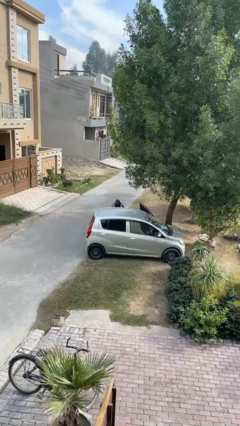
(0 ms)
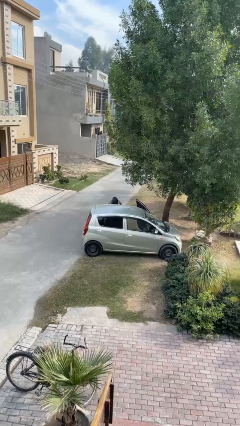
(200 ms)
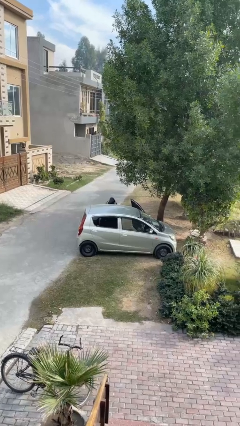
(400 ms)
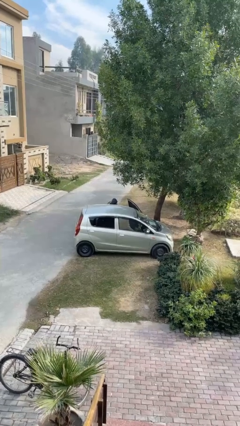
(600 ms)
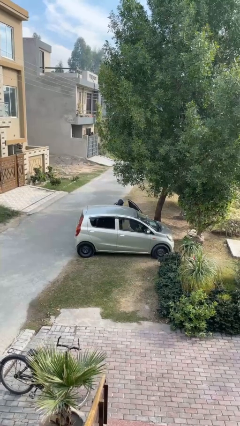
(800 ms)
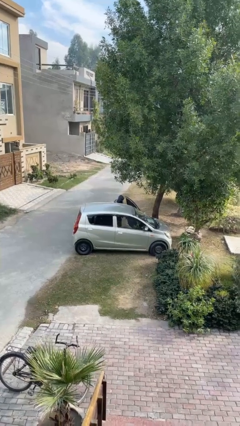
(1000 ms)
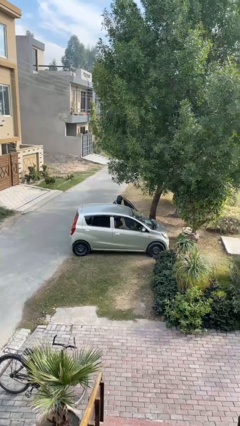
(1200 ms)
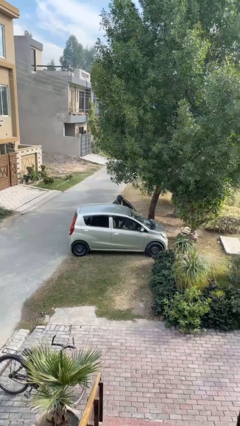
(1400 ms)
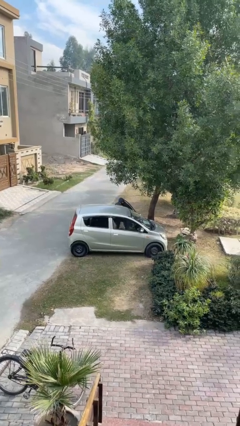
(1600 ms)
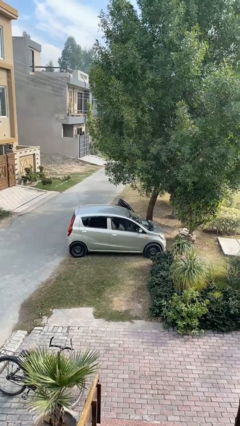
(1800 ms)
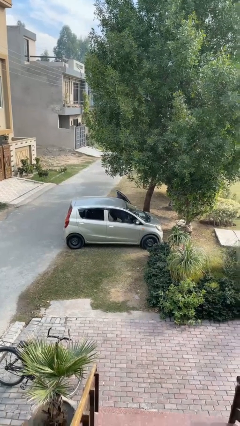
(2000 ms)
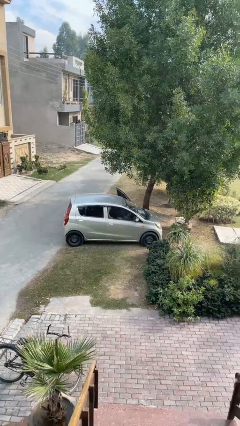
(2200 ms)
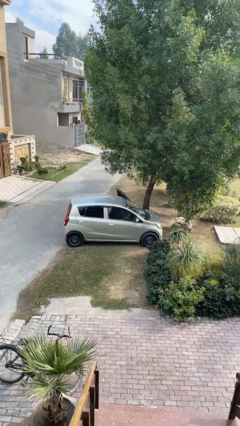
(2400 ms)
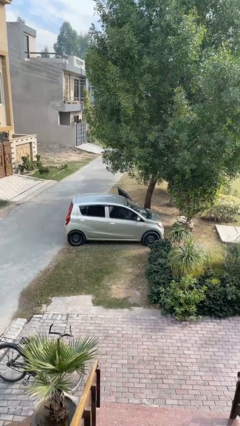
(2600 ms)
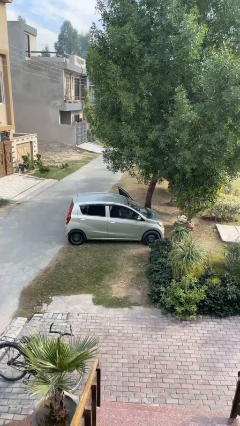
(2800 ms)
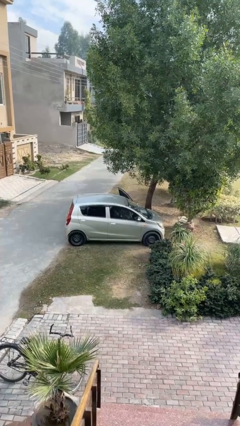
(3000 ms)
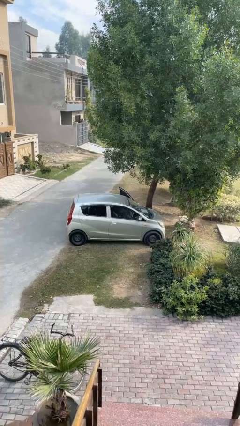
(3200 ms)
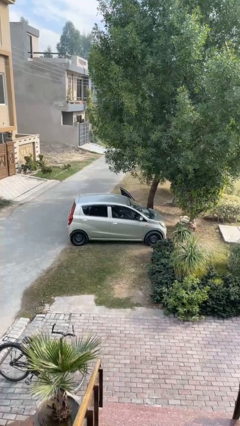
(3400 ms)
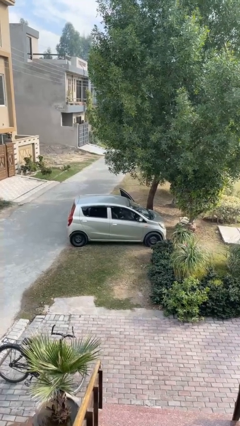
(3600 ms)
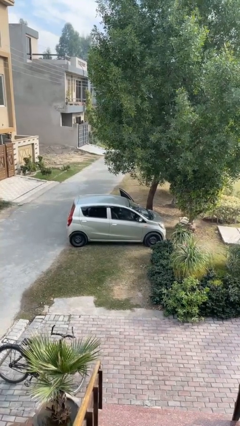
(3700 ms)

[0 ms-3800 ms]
person enters car

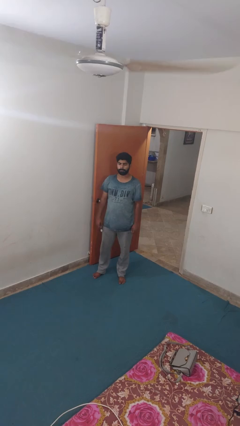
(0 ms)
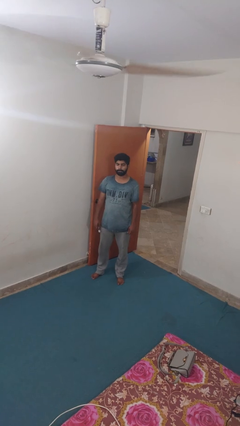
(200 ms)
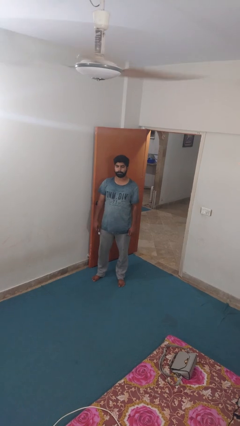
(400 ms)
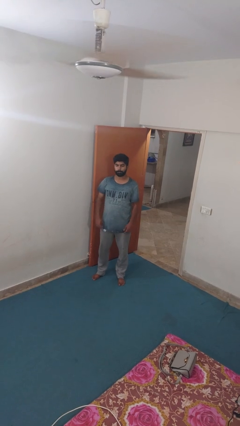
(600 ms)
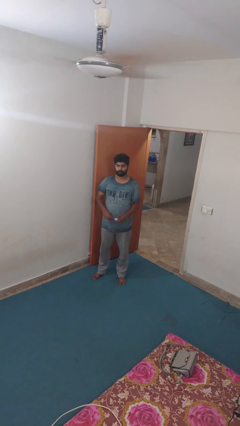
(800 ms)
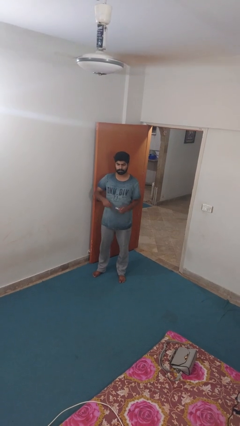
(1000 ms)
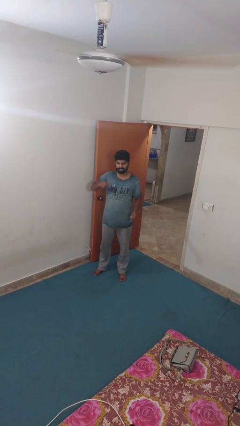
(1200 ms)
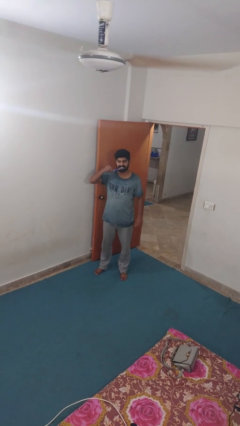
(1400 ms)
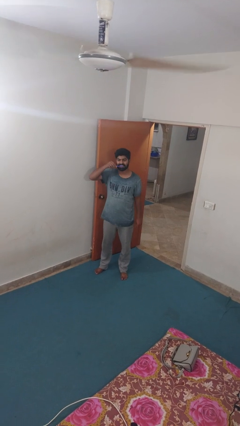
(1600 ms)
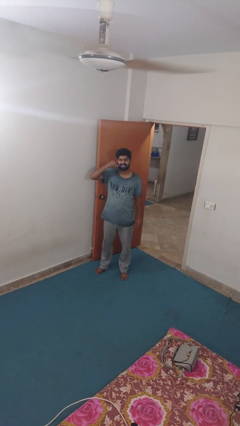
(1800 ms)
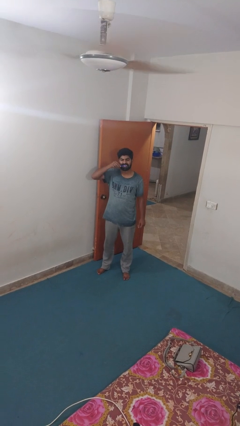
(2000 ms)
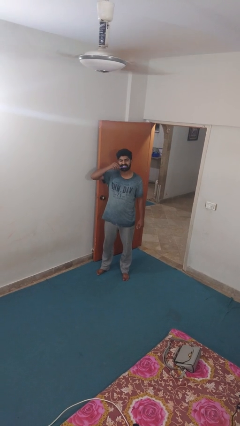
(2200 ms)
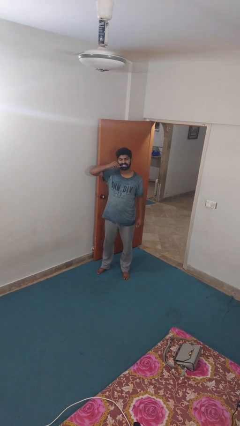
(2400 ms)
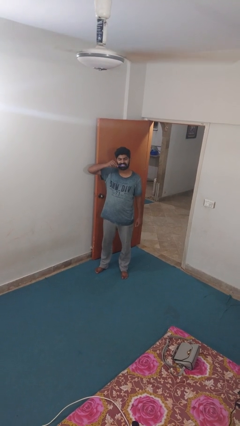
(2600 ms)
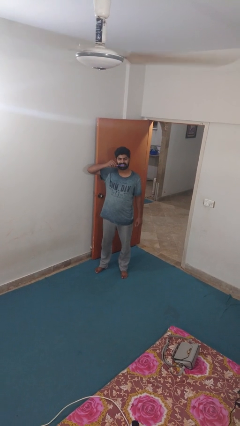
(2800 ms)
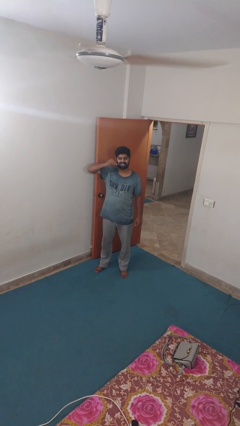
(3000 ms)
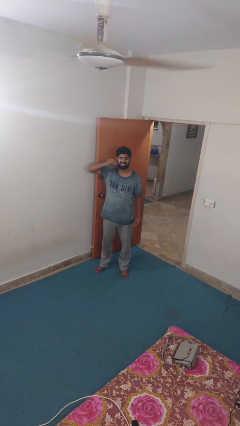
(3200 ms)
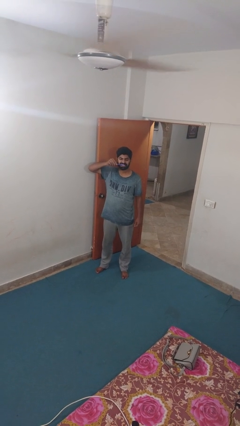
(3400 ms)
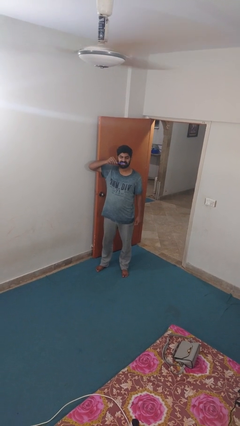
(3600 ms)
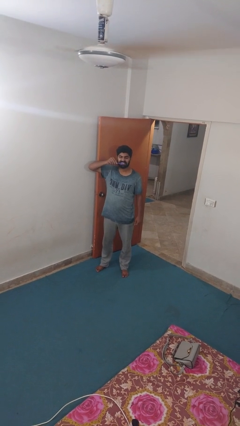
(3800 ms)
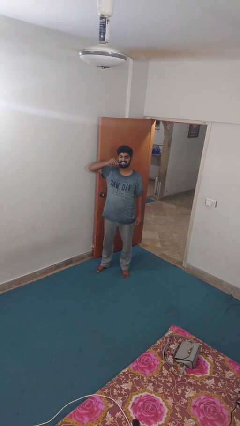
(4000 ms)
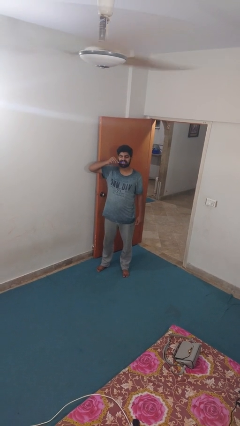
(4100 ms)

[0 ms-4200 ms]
person brushes teeth

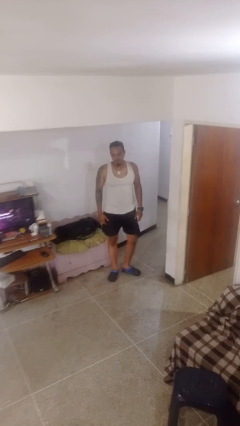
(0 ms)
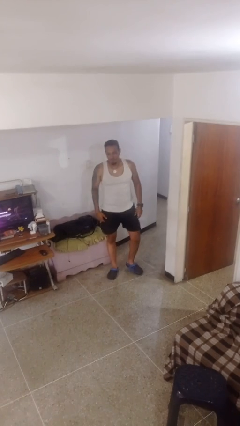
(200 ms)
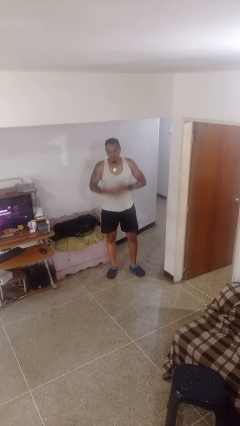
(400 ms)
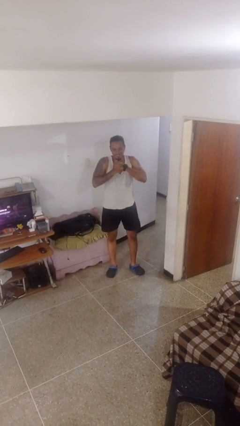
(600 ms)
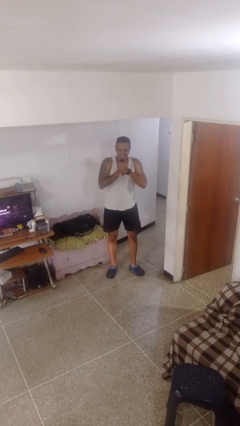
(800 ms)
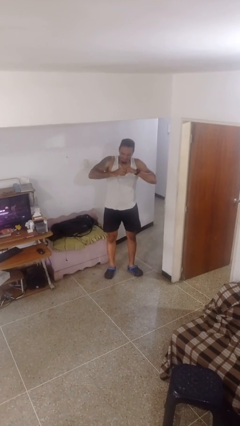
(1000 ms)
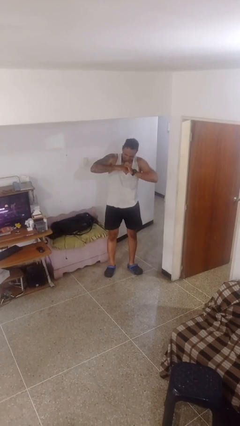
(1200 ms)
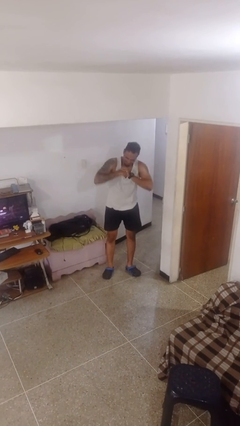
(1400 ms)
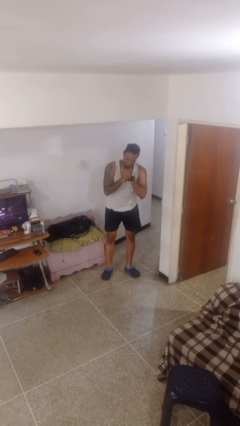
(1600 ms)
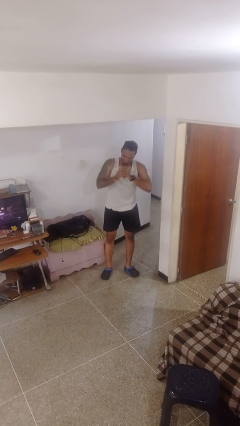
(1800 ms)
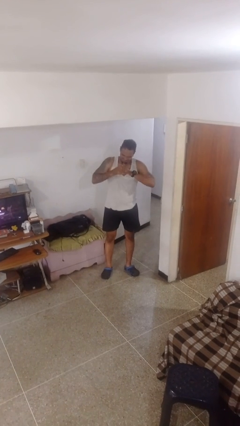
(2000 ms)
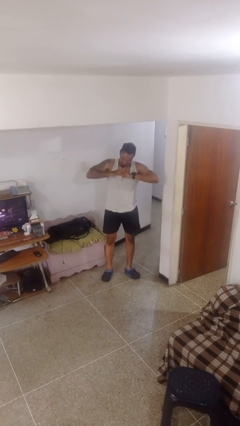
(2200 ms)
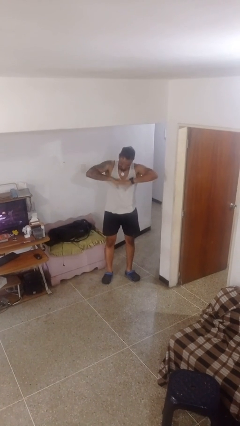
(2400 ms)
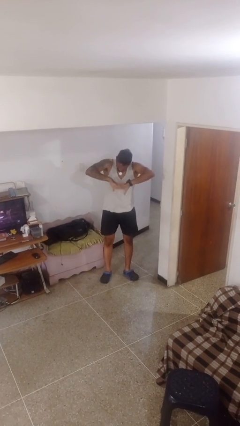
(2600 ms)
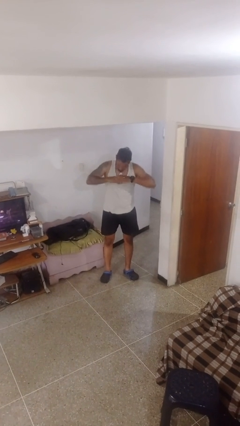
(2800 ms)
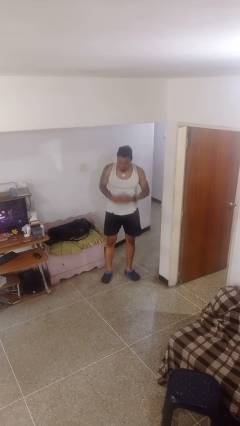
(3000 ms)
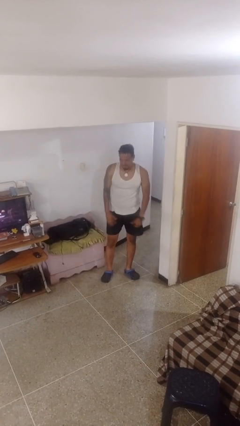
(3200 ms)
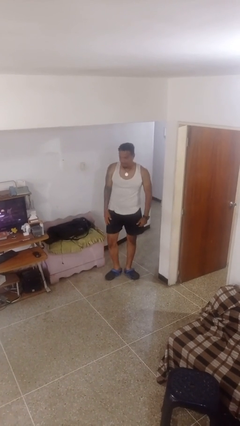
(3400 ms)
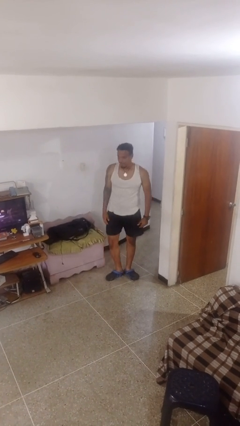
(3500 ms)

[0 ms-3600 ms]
person cracks knuckles

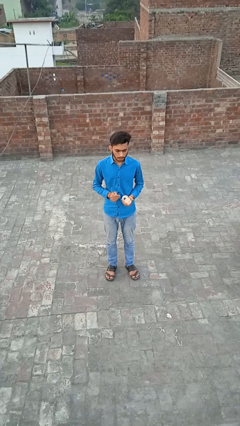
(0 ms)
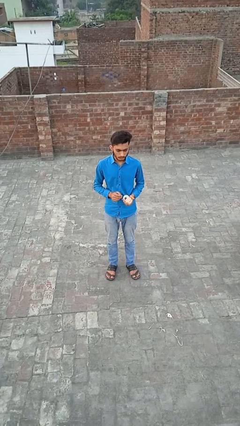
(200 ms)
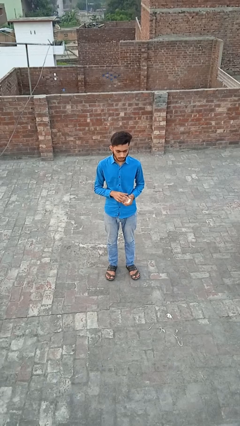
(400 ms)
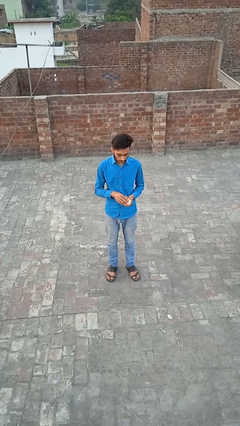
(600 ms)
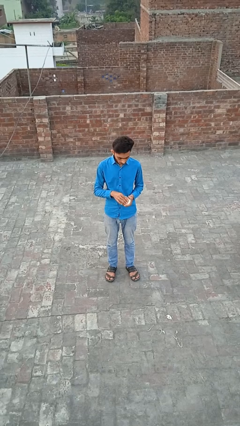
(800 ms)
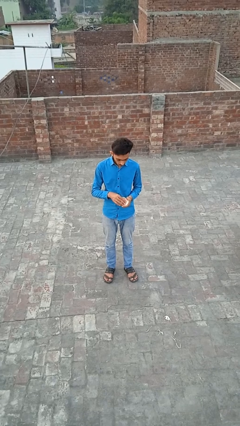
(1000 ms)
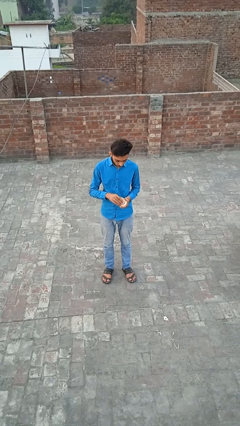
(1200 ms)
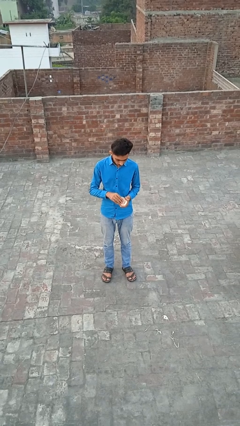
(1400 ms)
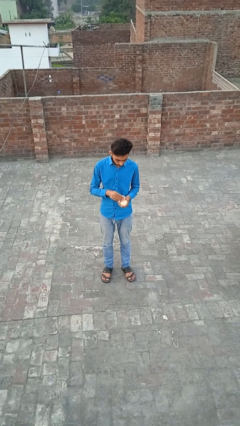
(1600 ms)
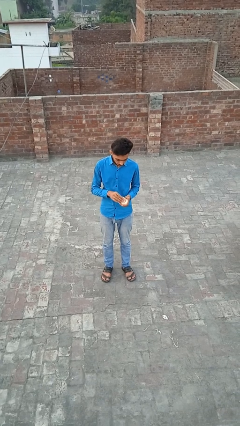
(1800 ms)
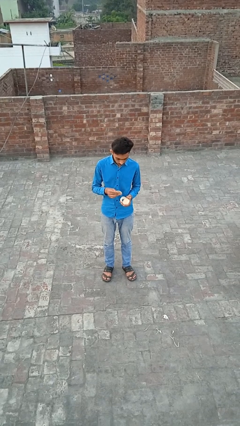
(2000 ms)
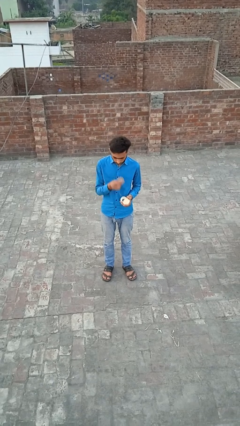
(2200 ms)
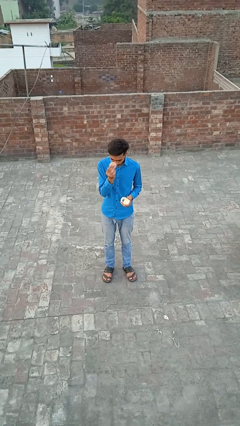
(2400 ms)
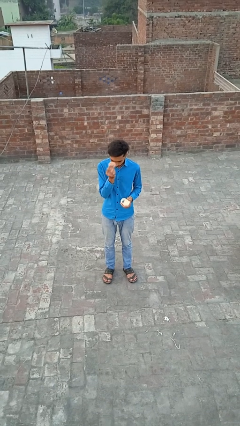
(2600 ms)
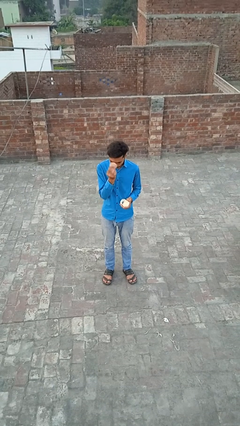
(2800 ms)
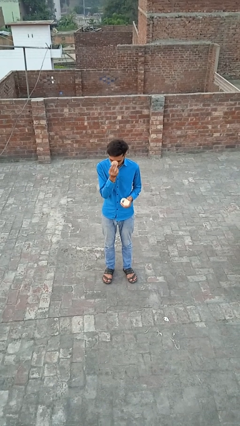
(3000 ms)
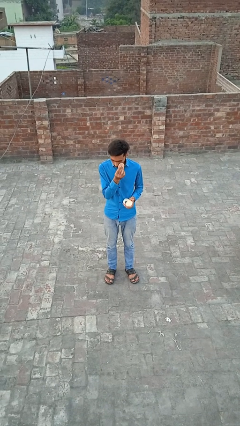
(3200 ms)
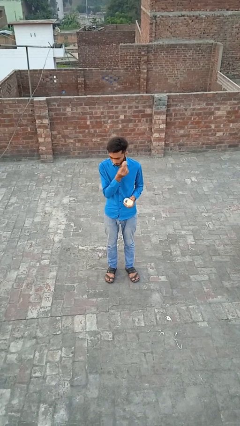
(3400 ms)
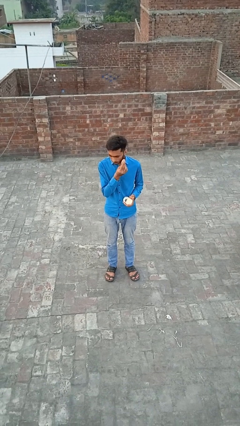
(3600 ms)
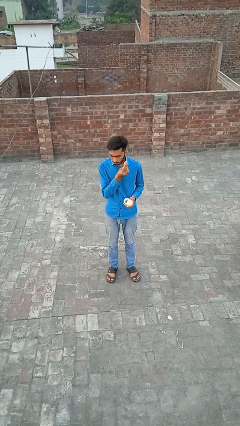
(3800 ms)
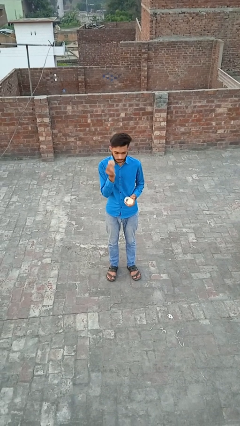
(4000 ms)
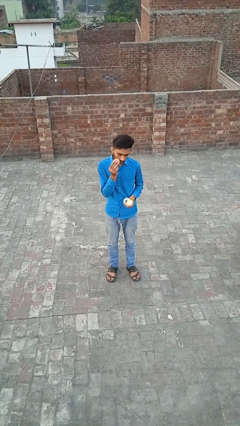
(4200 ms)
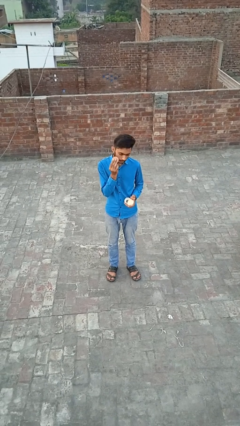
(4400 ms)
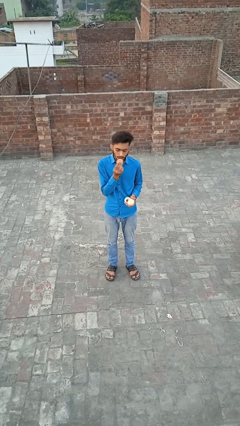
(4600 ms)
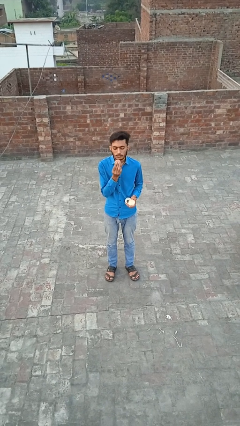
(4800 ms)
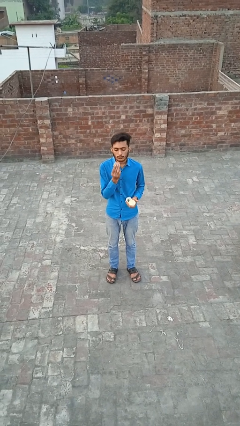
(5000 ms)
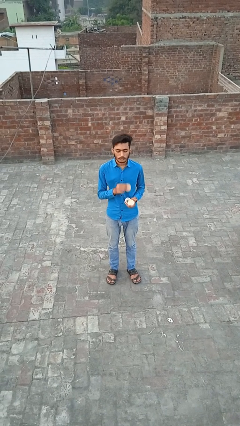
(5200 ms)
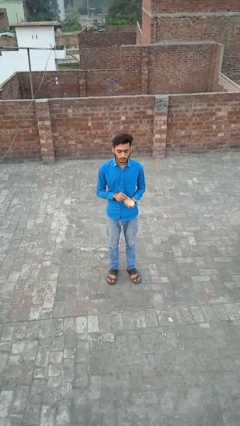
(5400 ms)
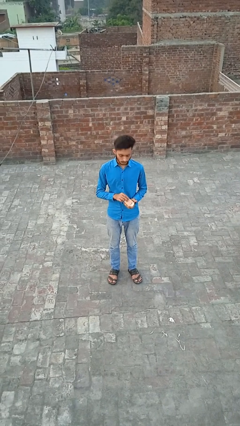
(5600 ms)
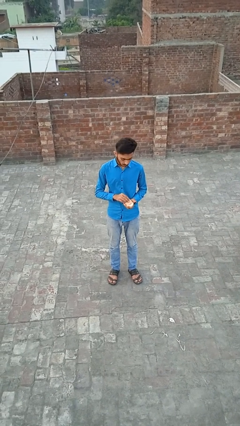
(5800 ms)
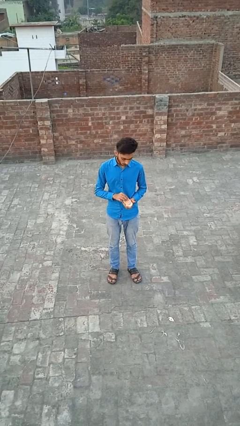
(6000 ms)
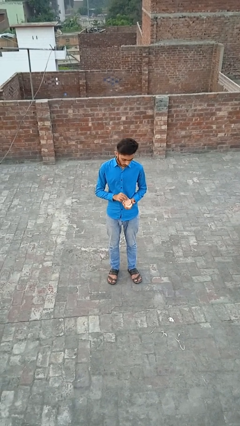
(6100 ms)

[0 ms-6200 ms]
person applies foundation makeup

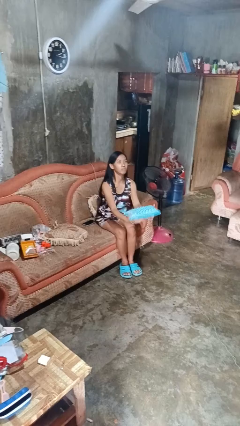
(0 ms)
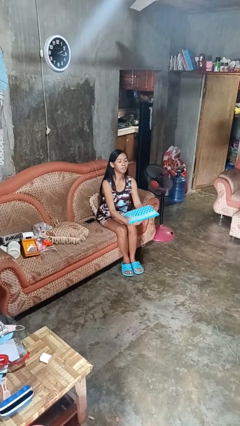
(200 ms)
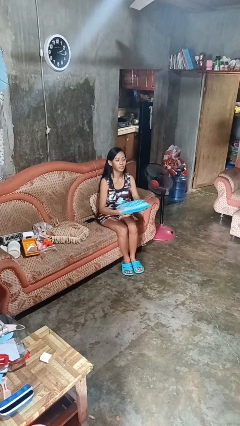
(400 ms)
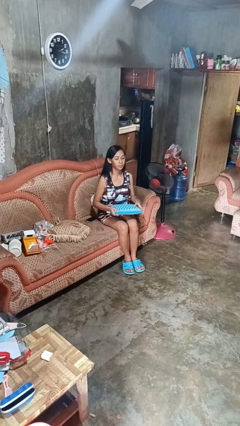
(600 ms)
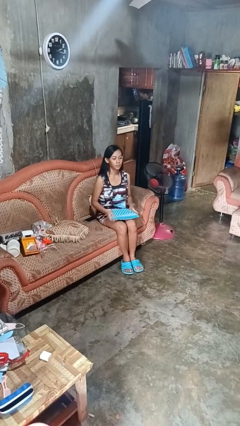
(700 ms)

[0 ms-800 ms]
person catches dropped object
